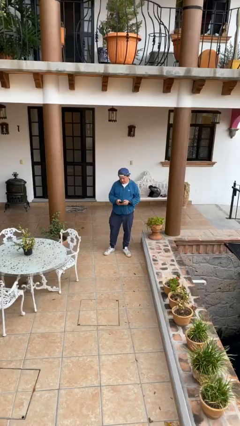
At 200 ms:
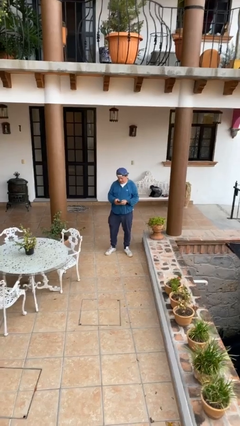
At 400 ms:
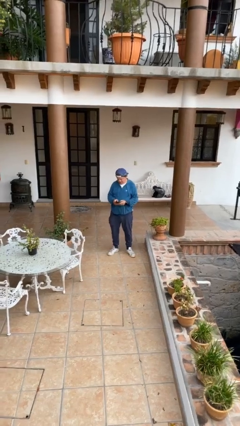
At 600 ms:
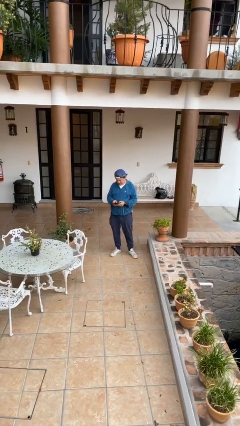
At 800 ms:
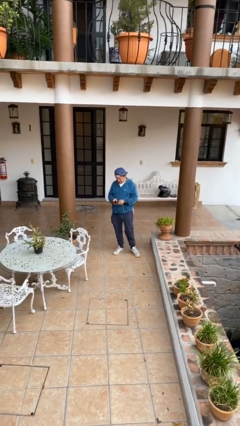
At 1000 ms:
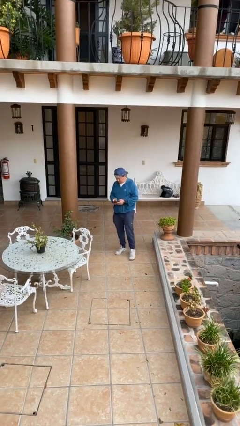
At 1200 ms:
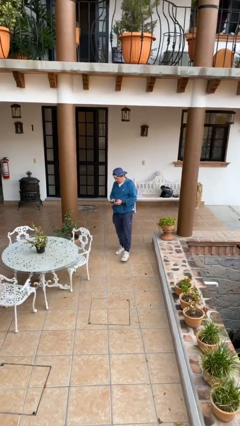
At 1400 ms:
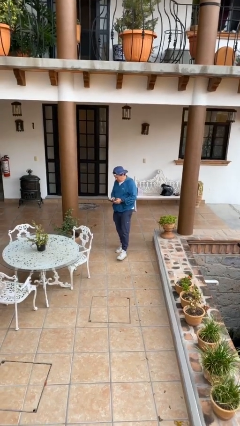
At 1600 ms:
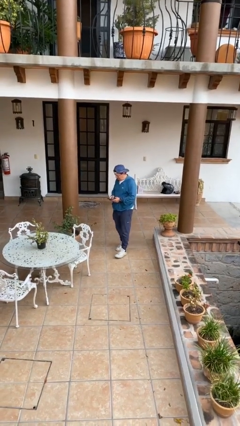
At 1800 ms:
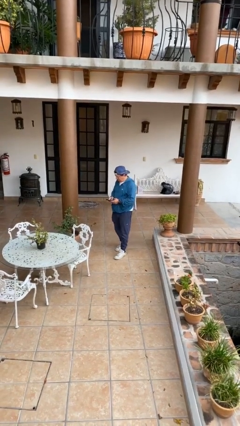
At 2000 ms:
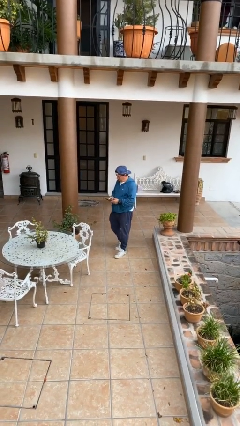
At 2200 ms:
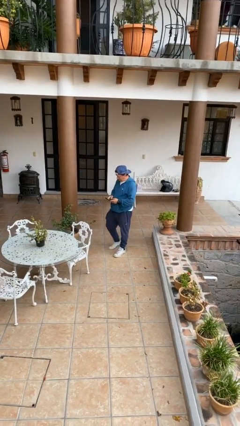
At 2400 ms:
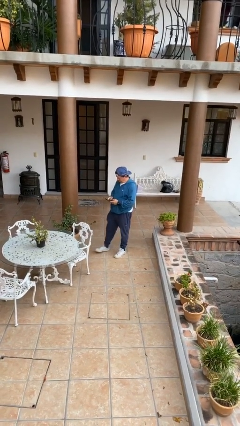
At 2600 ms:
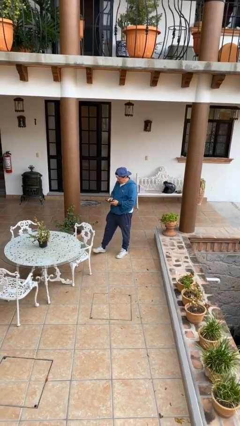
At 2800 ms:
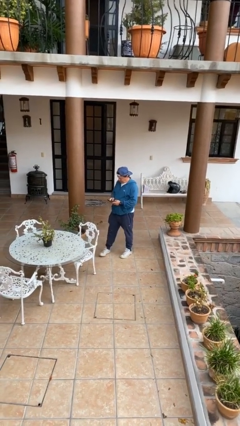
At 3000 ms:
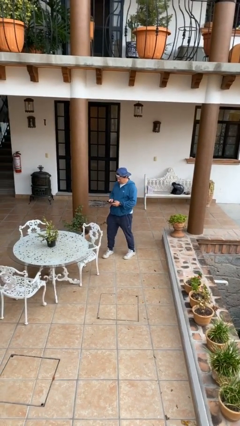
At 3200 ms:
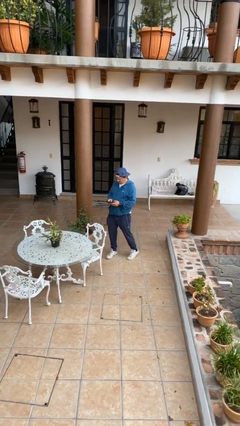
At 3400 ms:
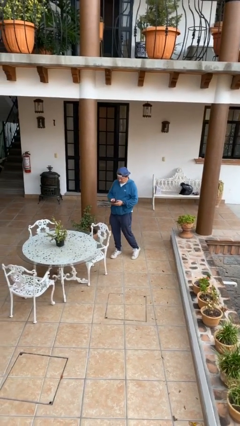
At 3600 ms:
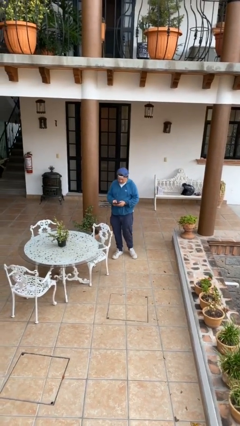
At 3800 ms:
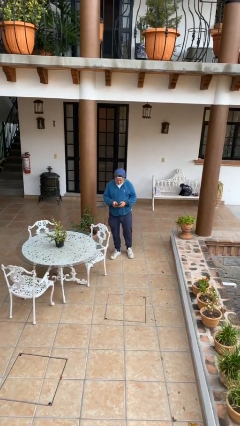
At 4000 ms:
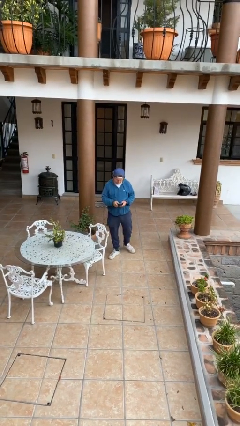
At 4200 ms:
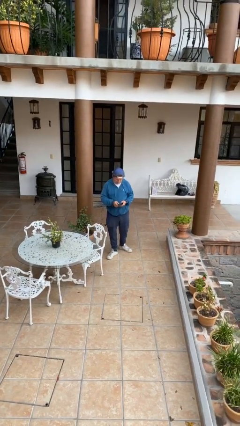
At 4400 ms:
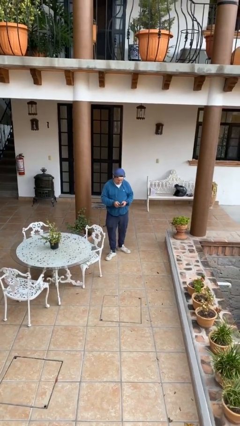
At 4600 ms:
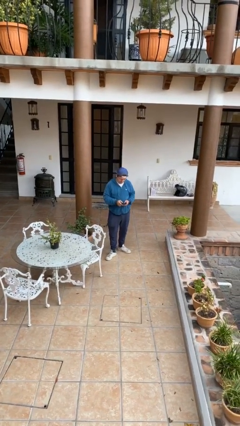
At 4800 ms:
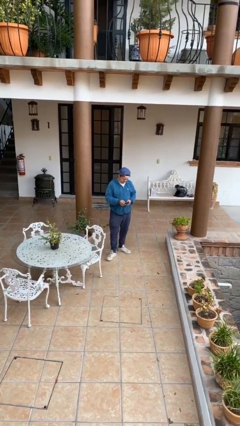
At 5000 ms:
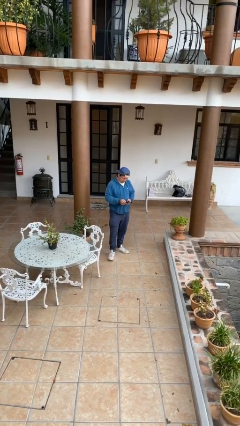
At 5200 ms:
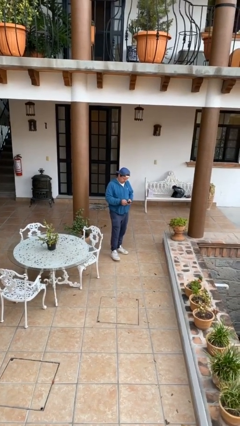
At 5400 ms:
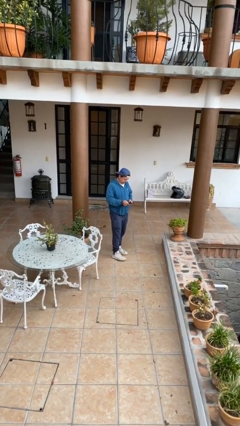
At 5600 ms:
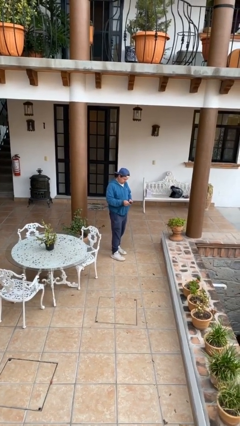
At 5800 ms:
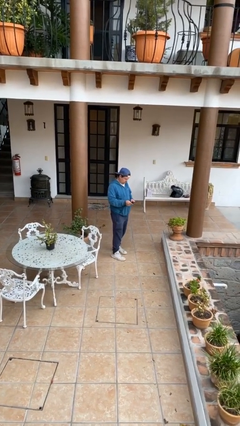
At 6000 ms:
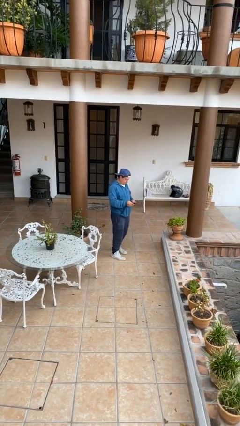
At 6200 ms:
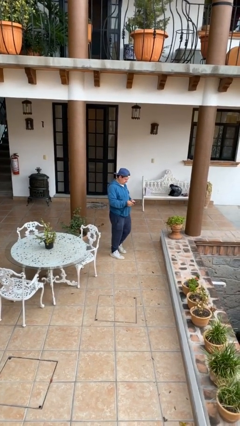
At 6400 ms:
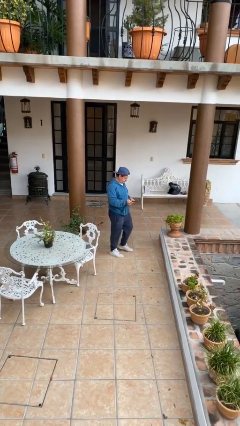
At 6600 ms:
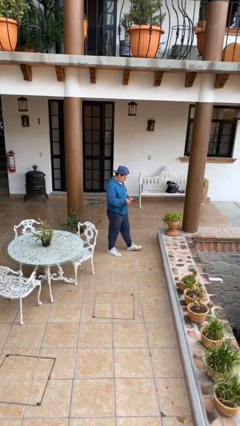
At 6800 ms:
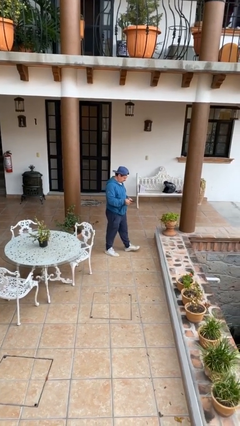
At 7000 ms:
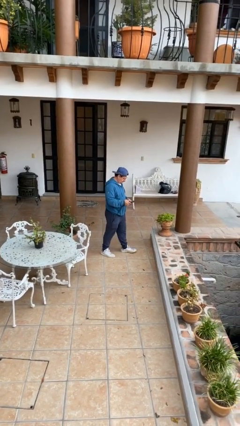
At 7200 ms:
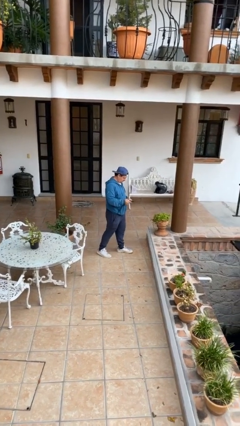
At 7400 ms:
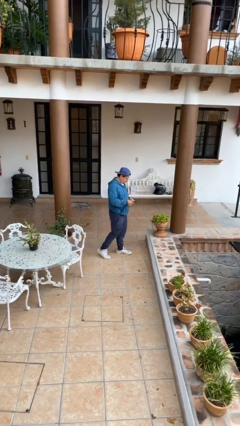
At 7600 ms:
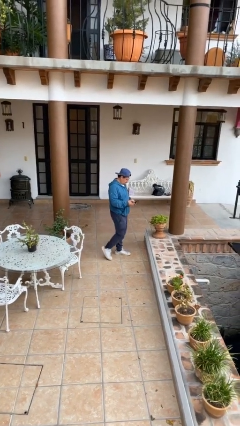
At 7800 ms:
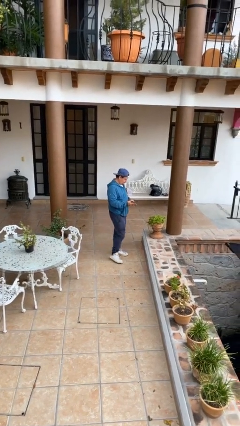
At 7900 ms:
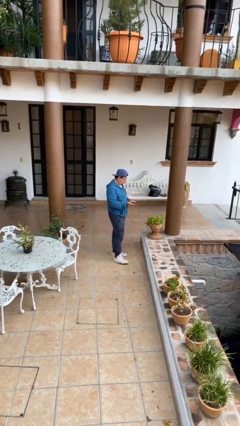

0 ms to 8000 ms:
person texts on phone

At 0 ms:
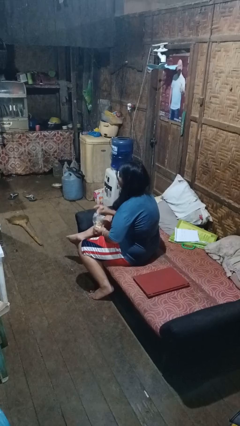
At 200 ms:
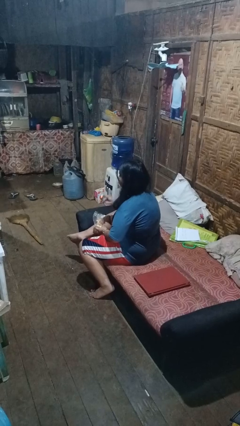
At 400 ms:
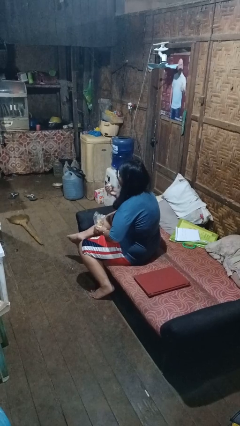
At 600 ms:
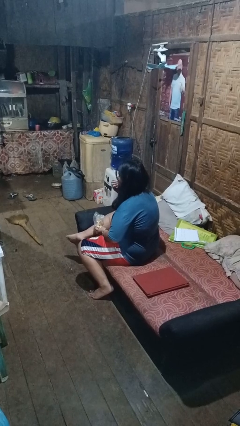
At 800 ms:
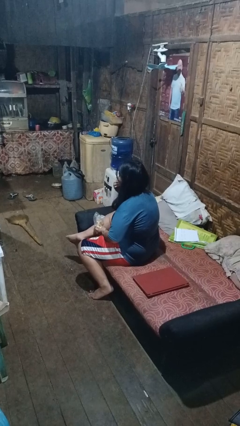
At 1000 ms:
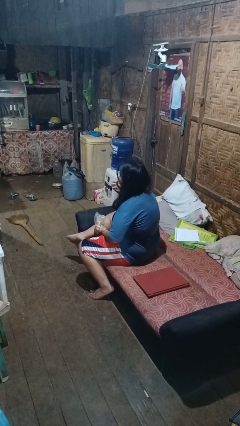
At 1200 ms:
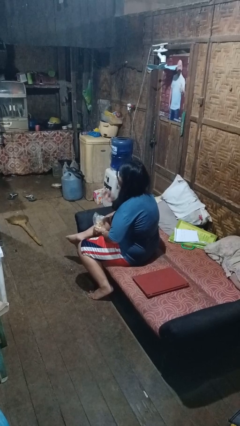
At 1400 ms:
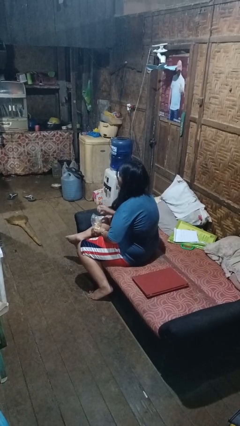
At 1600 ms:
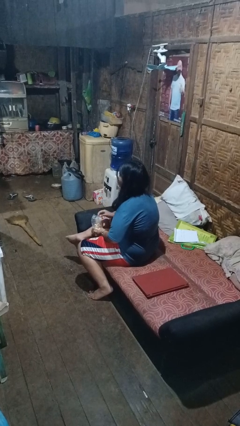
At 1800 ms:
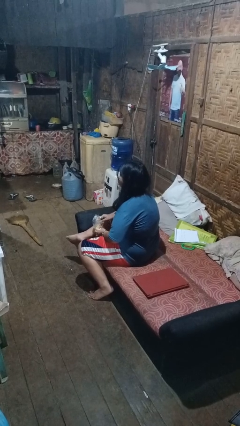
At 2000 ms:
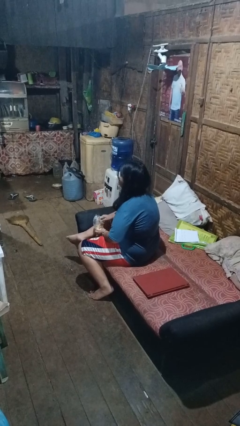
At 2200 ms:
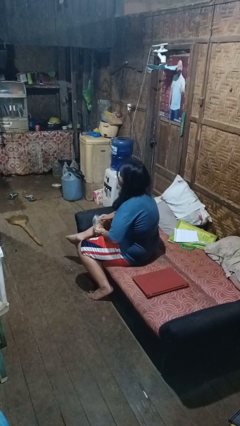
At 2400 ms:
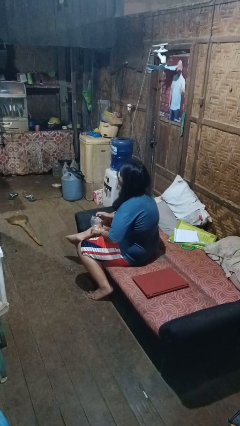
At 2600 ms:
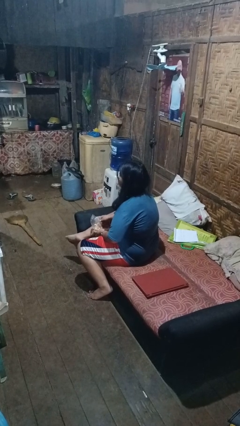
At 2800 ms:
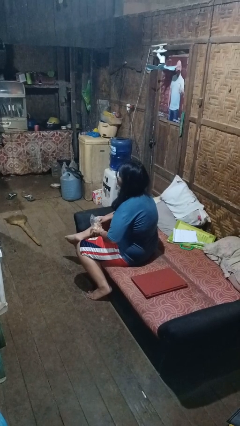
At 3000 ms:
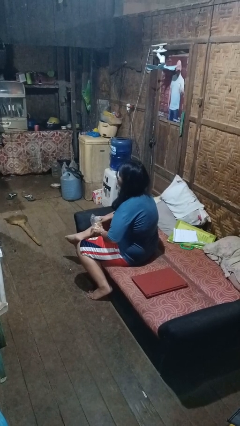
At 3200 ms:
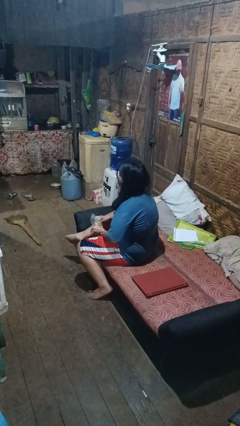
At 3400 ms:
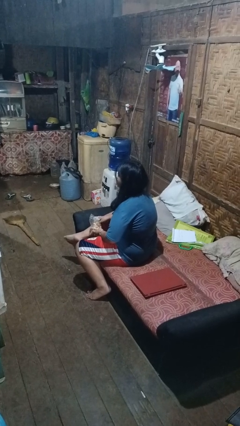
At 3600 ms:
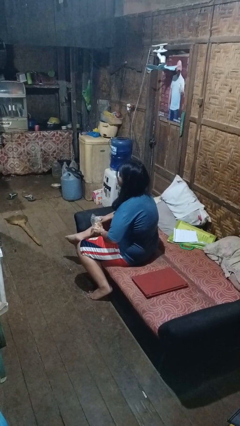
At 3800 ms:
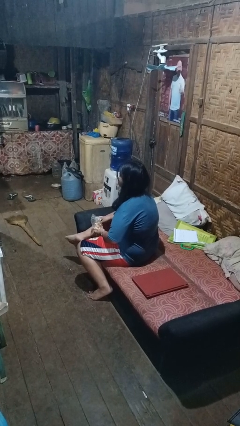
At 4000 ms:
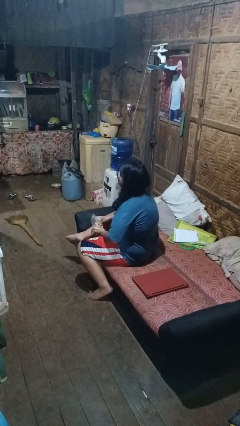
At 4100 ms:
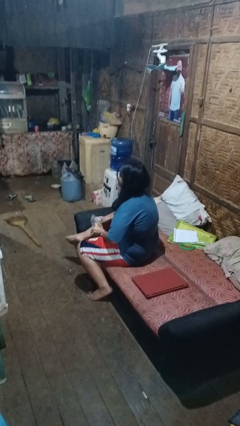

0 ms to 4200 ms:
person eats snack from bag

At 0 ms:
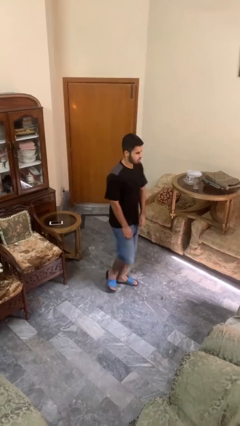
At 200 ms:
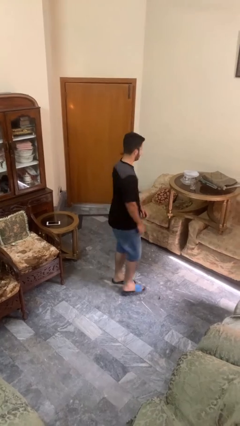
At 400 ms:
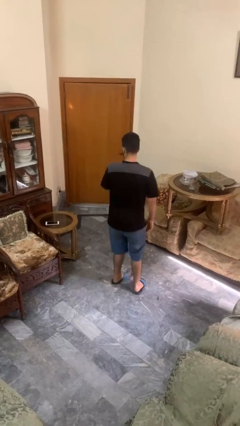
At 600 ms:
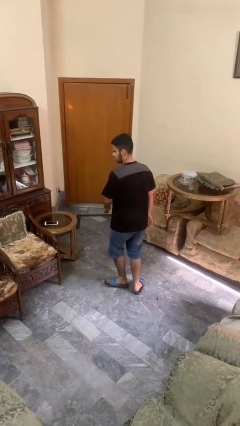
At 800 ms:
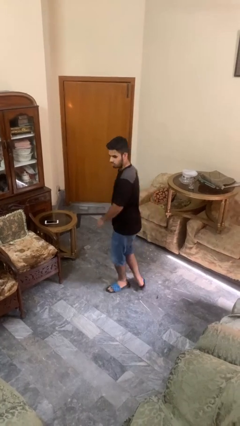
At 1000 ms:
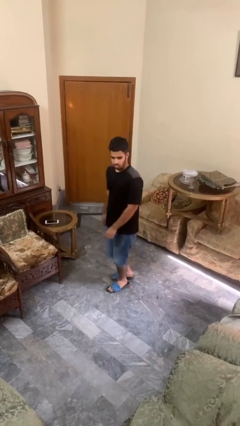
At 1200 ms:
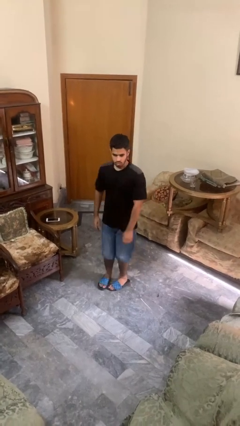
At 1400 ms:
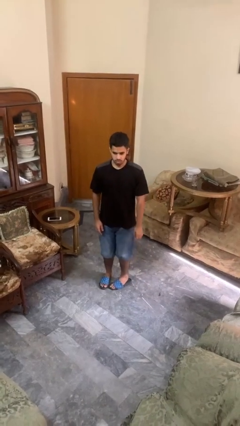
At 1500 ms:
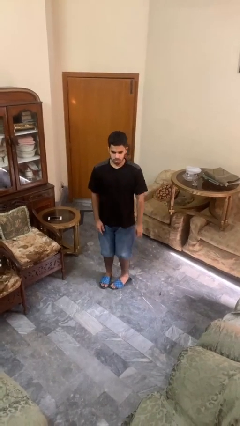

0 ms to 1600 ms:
person twirls

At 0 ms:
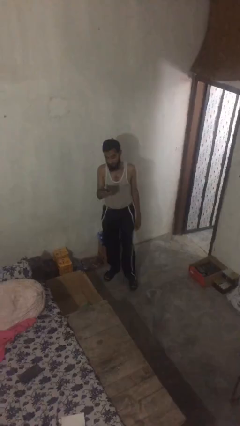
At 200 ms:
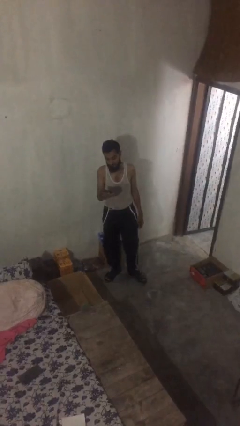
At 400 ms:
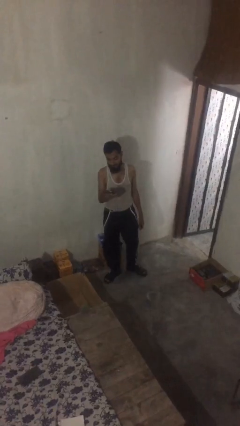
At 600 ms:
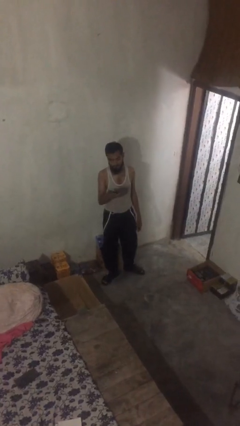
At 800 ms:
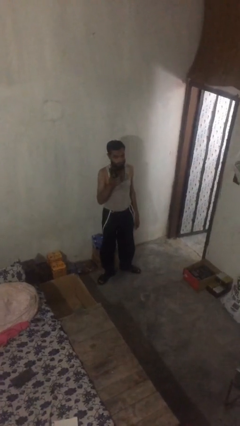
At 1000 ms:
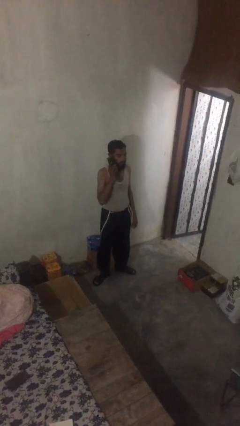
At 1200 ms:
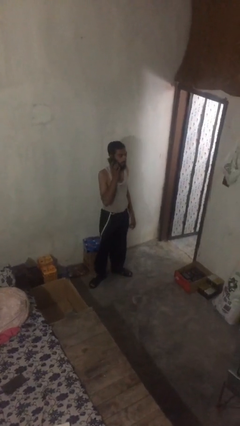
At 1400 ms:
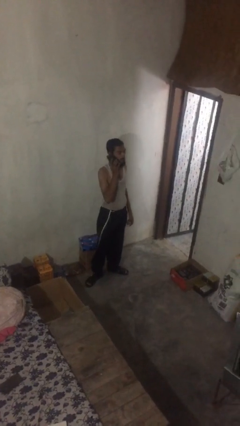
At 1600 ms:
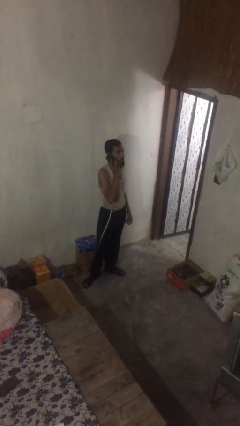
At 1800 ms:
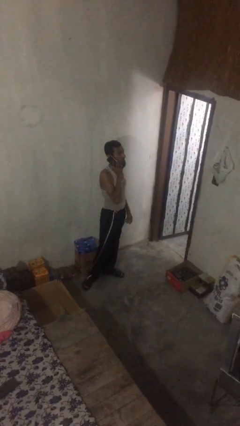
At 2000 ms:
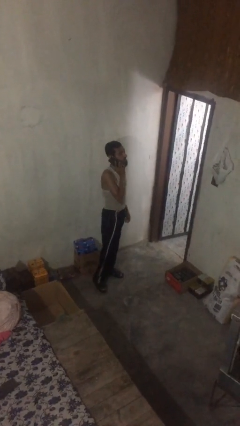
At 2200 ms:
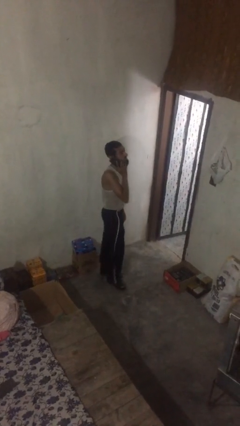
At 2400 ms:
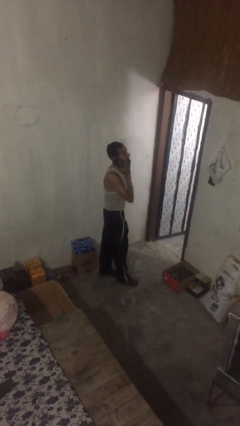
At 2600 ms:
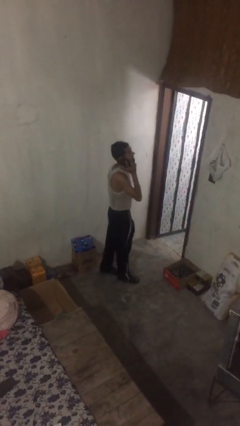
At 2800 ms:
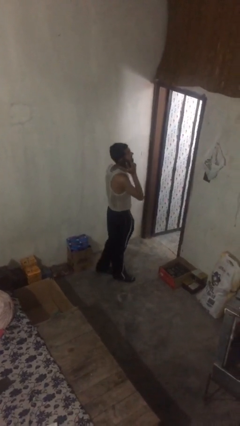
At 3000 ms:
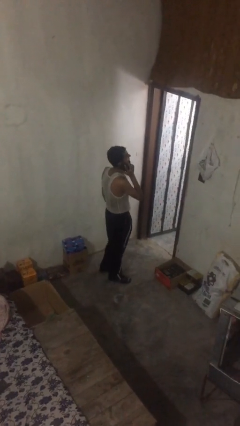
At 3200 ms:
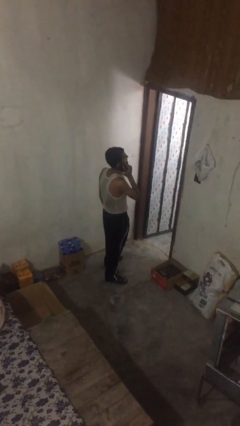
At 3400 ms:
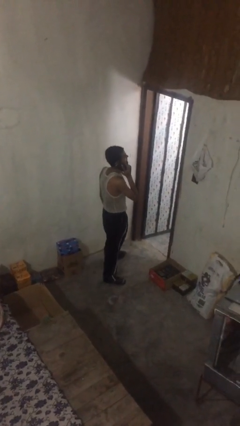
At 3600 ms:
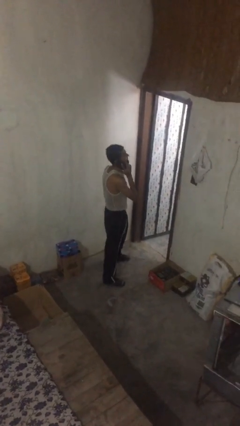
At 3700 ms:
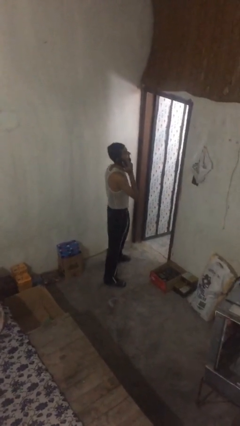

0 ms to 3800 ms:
person talks on phone
